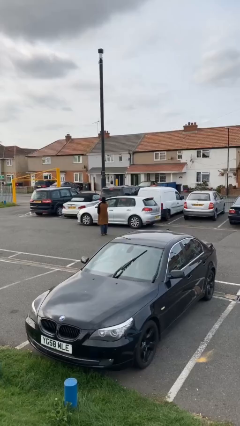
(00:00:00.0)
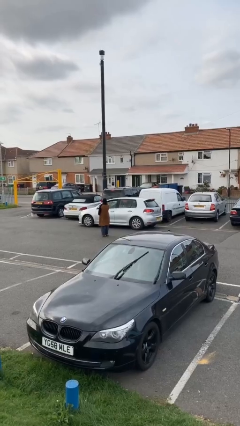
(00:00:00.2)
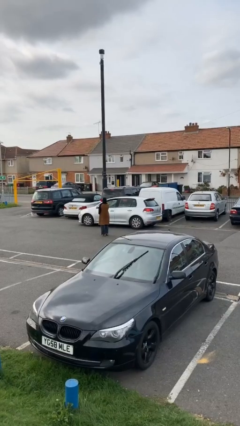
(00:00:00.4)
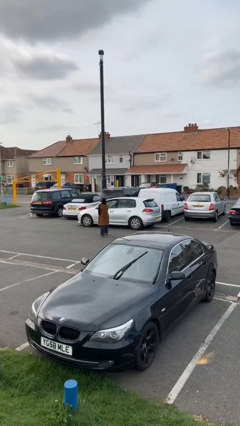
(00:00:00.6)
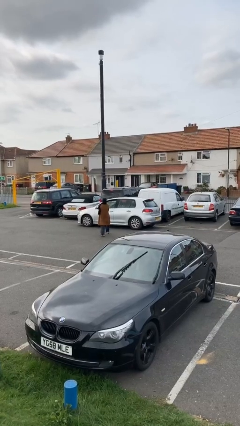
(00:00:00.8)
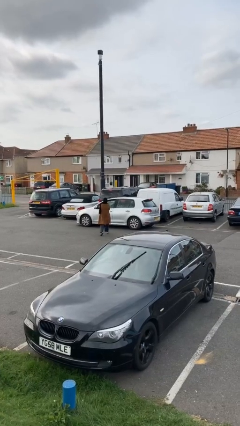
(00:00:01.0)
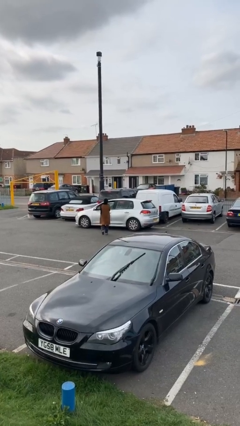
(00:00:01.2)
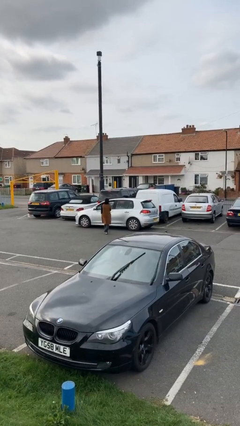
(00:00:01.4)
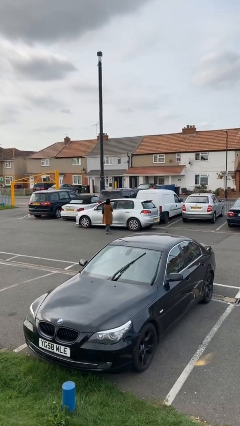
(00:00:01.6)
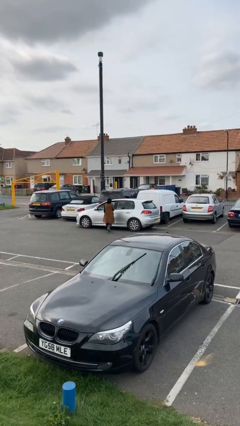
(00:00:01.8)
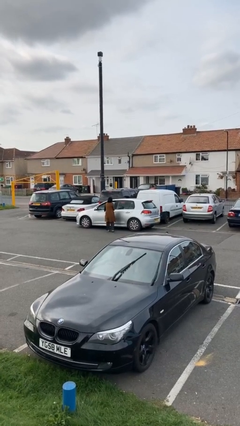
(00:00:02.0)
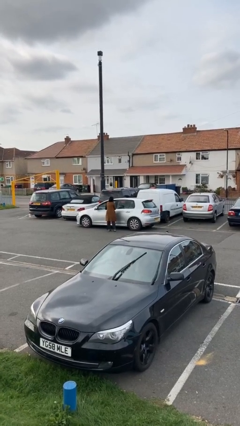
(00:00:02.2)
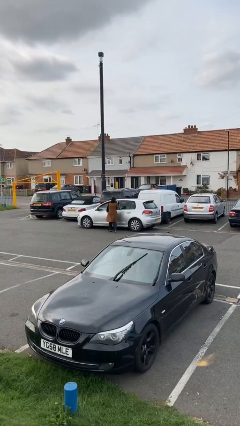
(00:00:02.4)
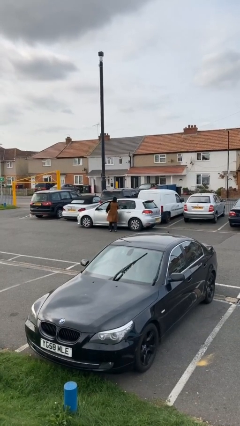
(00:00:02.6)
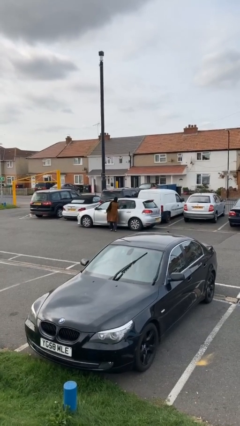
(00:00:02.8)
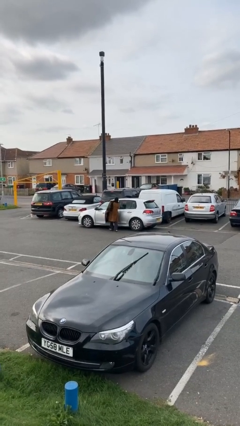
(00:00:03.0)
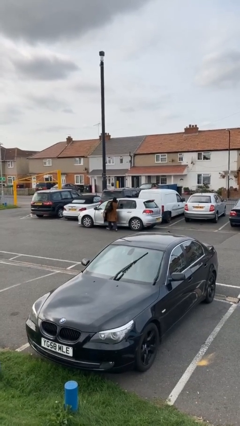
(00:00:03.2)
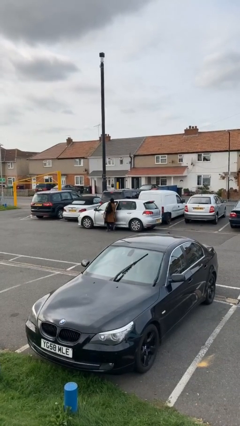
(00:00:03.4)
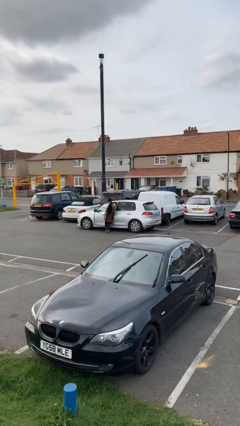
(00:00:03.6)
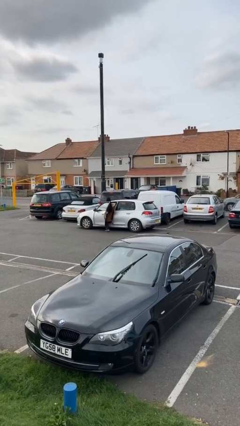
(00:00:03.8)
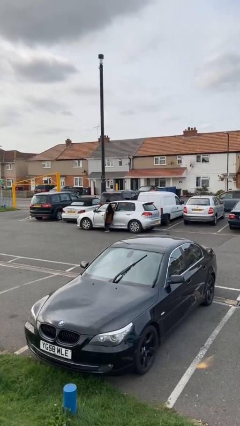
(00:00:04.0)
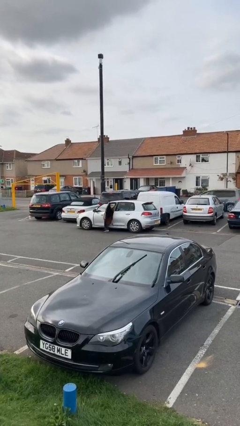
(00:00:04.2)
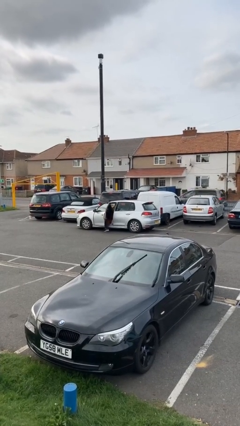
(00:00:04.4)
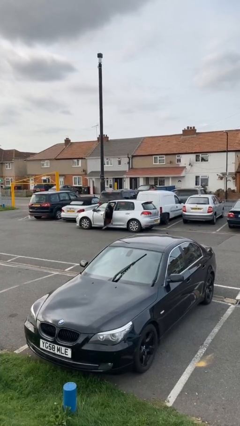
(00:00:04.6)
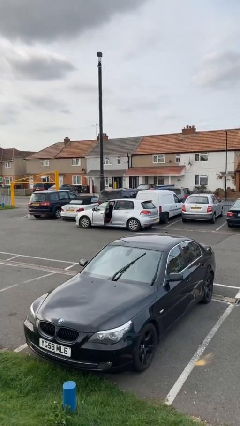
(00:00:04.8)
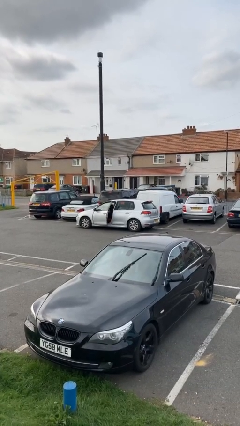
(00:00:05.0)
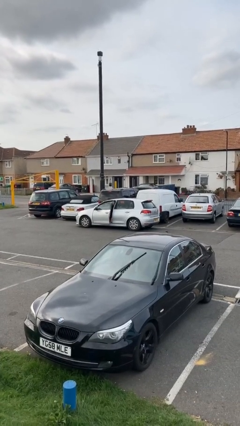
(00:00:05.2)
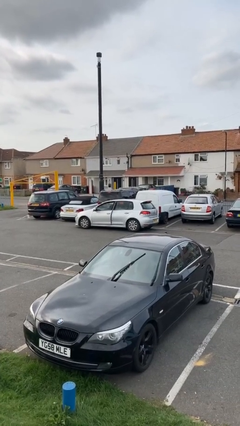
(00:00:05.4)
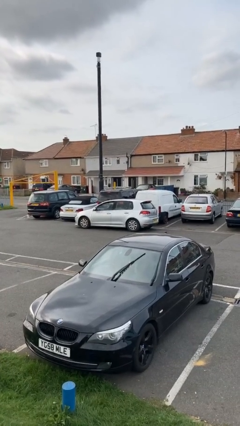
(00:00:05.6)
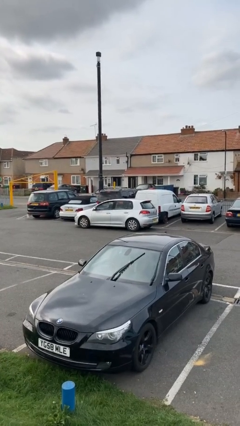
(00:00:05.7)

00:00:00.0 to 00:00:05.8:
car picks up person

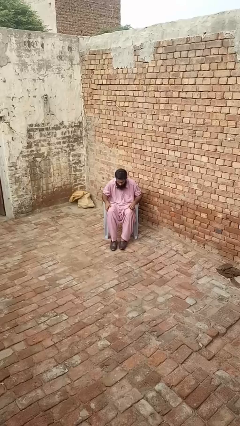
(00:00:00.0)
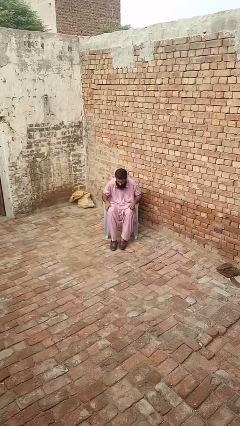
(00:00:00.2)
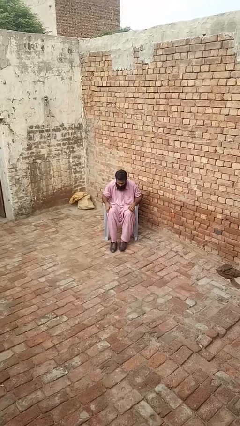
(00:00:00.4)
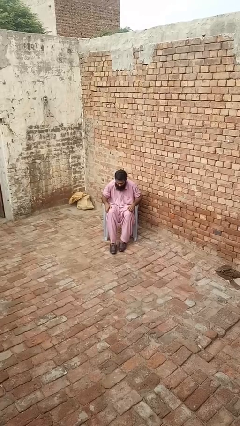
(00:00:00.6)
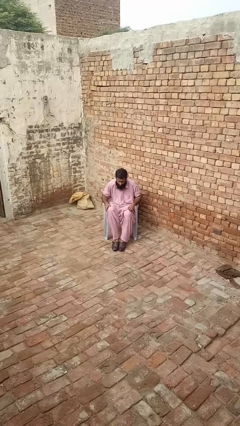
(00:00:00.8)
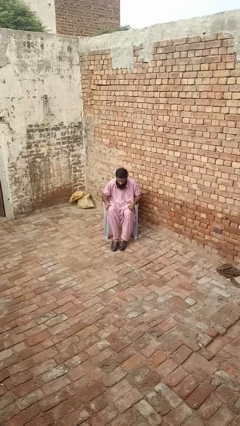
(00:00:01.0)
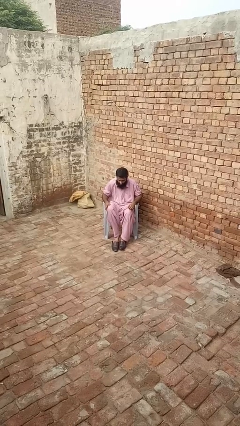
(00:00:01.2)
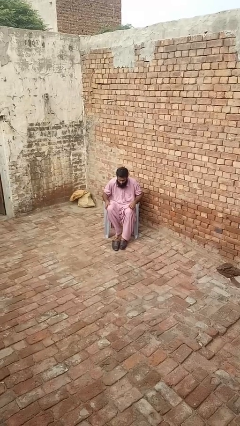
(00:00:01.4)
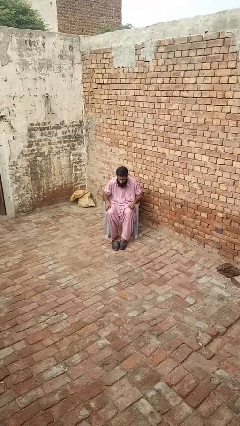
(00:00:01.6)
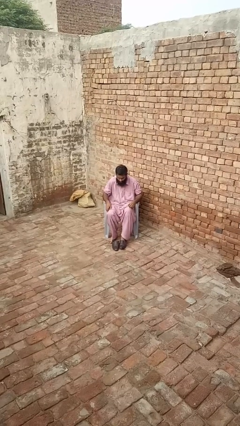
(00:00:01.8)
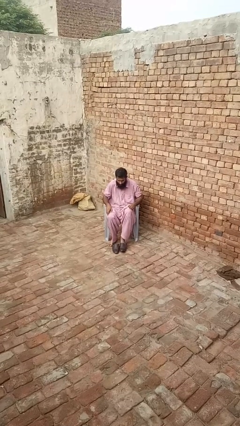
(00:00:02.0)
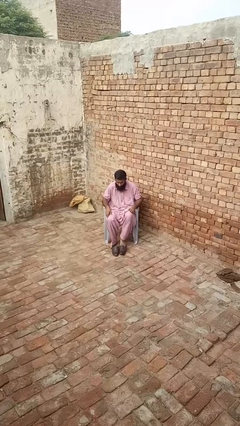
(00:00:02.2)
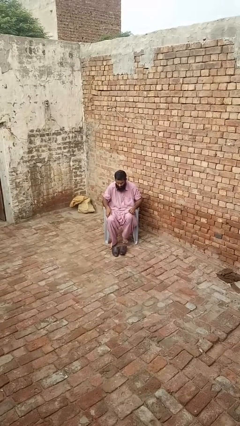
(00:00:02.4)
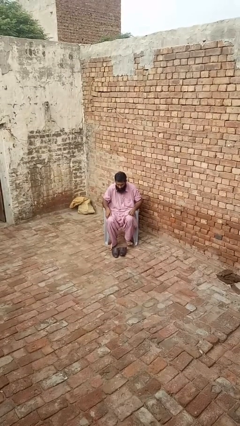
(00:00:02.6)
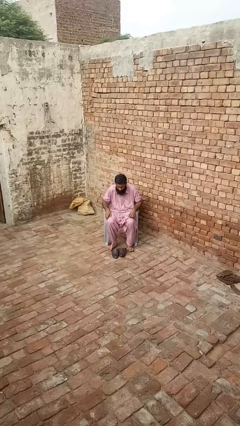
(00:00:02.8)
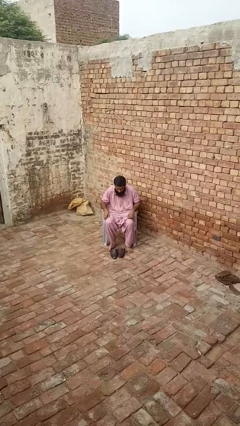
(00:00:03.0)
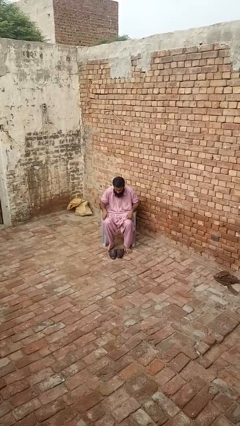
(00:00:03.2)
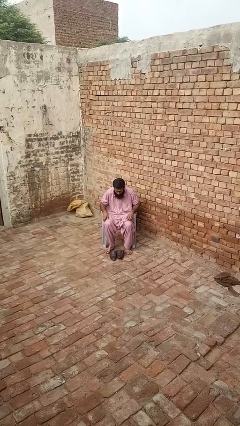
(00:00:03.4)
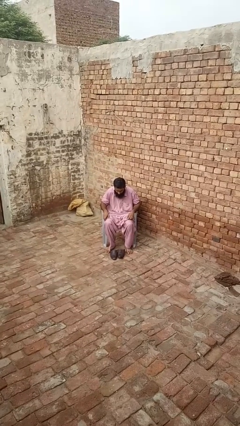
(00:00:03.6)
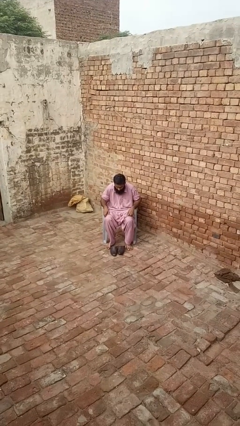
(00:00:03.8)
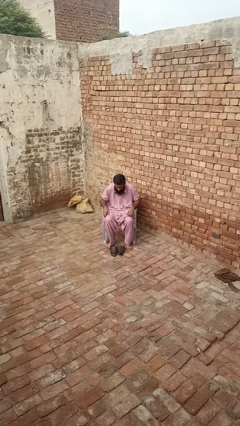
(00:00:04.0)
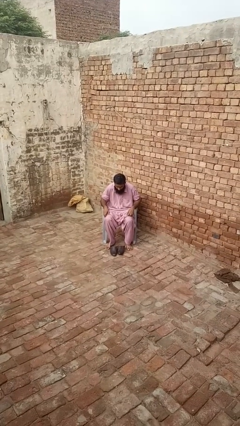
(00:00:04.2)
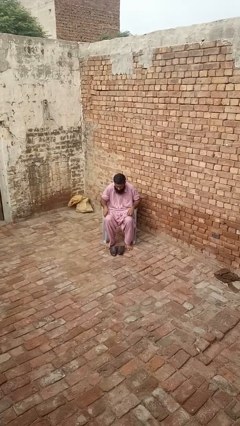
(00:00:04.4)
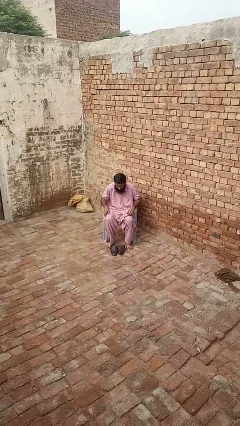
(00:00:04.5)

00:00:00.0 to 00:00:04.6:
person takes off shoes

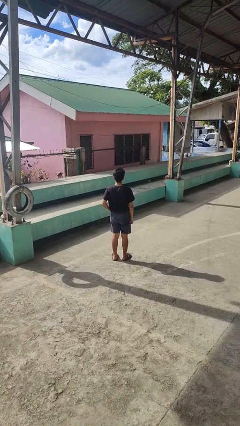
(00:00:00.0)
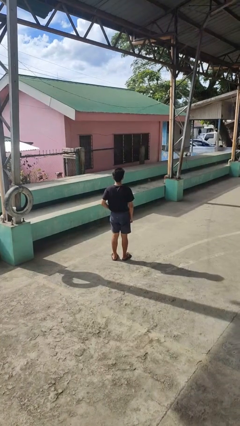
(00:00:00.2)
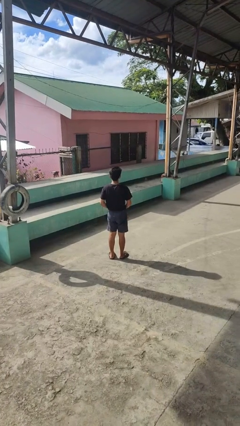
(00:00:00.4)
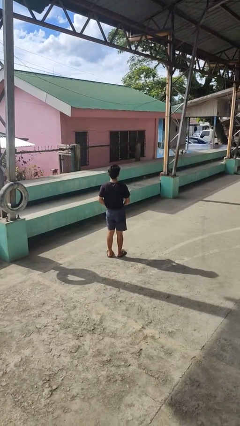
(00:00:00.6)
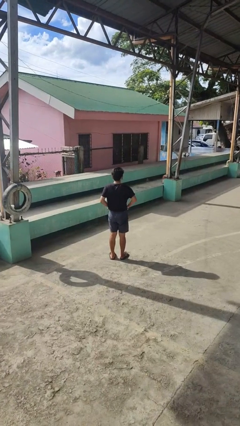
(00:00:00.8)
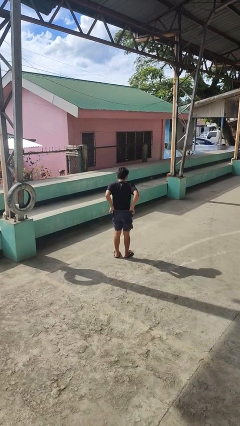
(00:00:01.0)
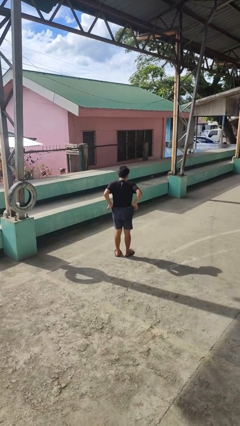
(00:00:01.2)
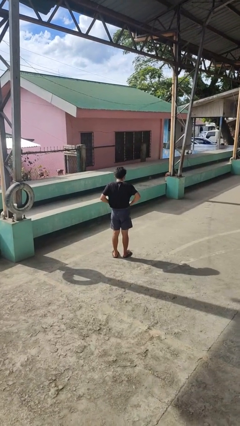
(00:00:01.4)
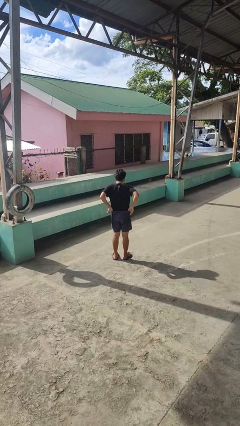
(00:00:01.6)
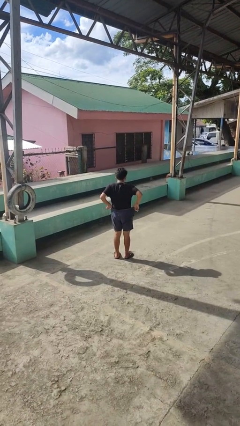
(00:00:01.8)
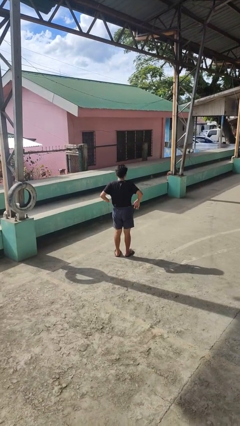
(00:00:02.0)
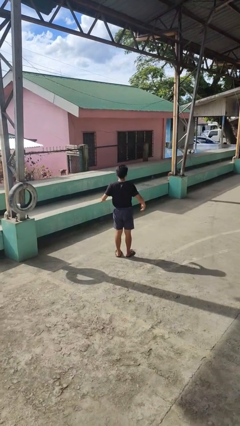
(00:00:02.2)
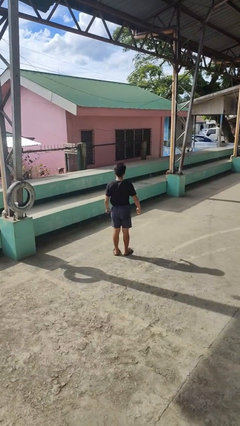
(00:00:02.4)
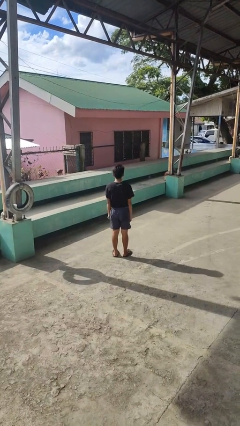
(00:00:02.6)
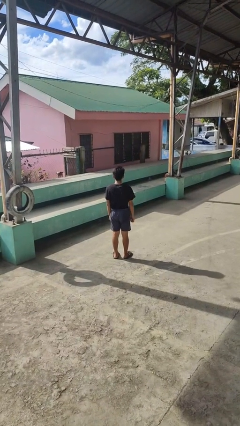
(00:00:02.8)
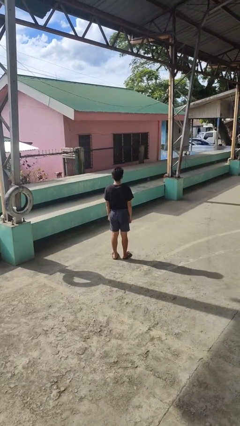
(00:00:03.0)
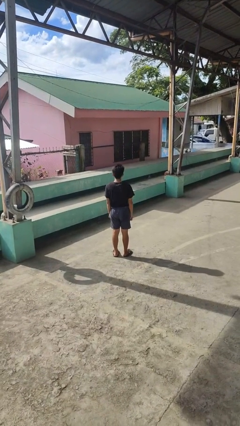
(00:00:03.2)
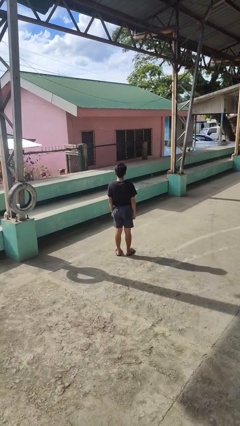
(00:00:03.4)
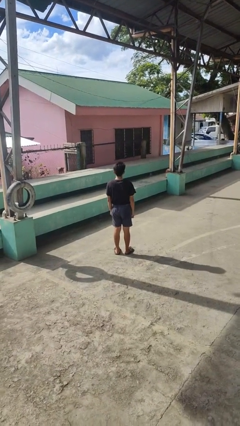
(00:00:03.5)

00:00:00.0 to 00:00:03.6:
person hikes up pants

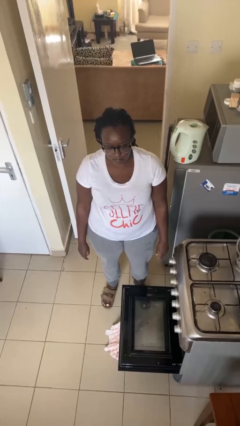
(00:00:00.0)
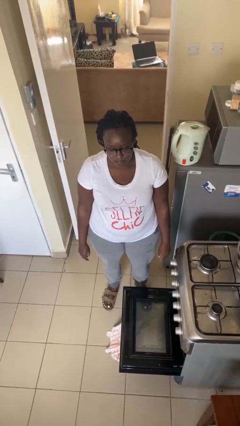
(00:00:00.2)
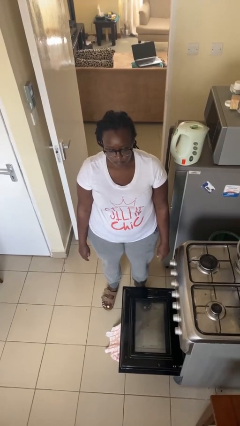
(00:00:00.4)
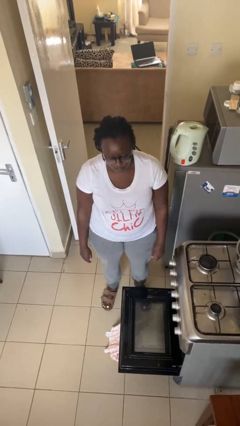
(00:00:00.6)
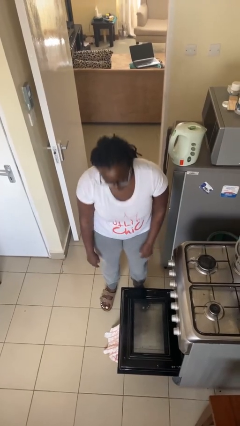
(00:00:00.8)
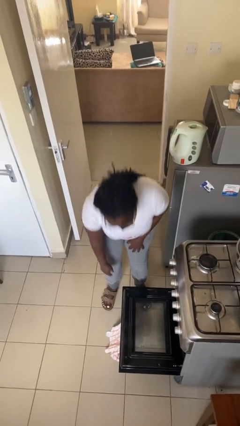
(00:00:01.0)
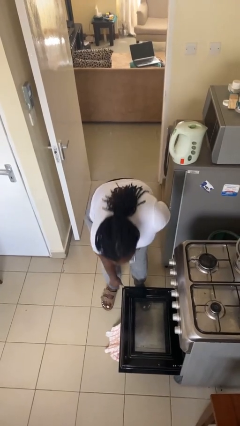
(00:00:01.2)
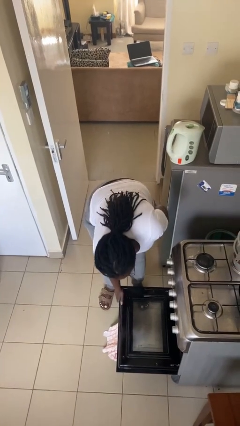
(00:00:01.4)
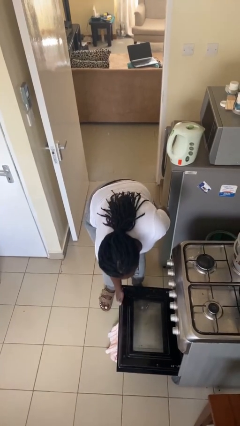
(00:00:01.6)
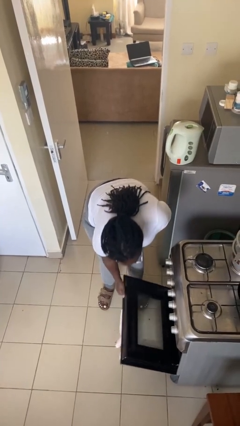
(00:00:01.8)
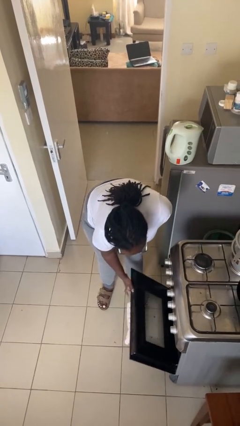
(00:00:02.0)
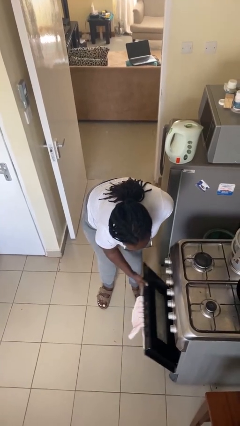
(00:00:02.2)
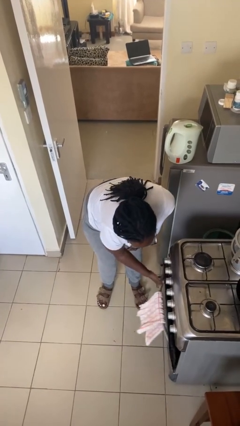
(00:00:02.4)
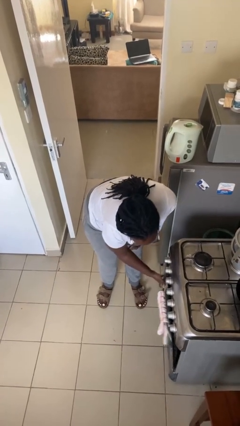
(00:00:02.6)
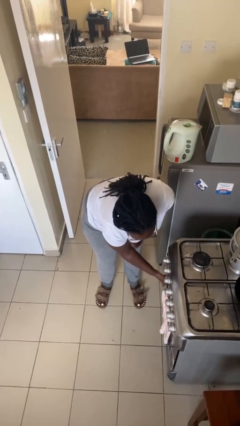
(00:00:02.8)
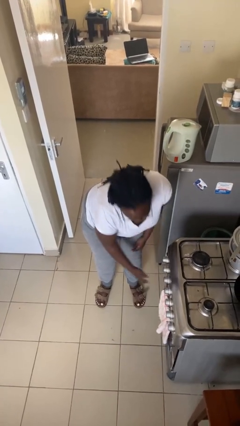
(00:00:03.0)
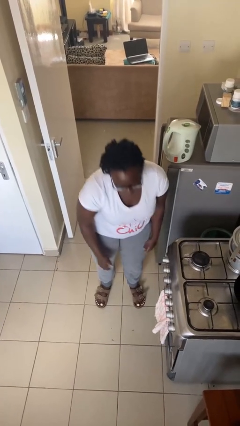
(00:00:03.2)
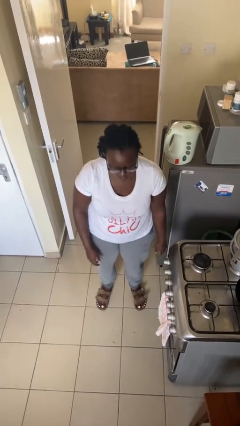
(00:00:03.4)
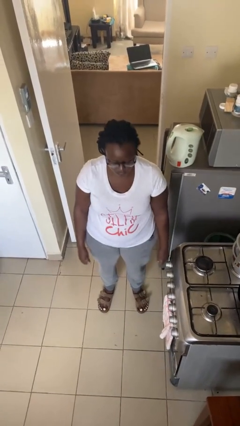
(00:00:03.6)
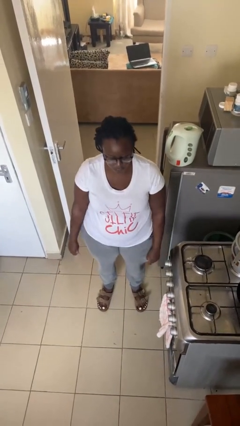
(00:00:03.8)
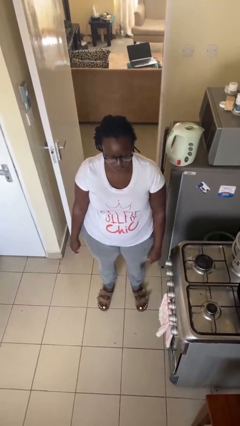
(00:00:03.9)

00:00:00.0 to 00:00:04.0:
person closes oven door
